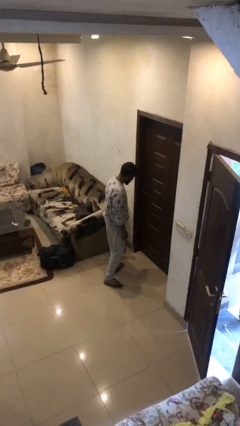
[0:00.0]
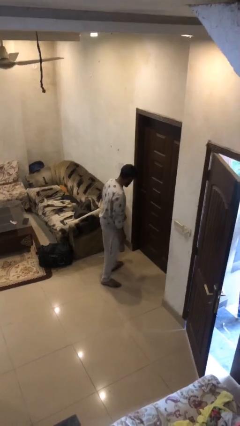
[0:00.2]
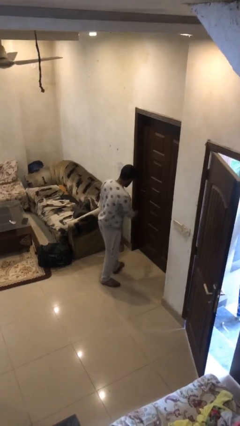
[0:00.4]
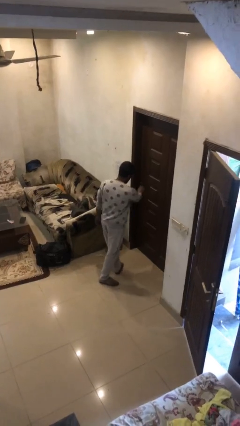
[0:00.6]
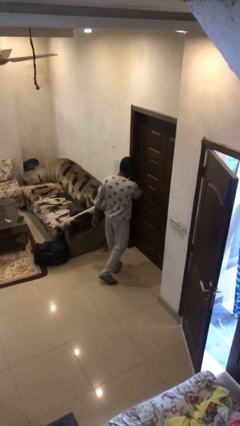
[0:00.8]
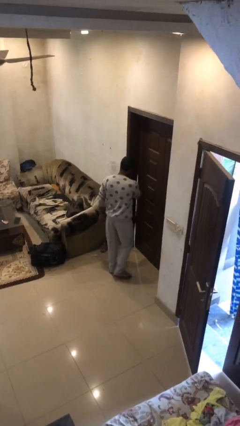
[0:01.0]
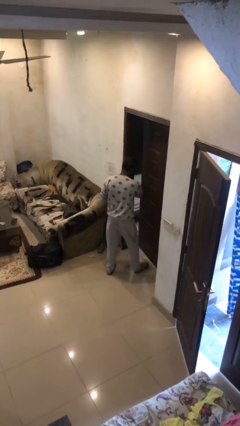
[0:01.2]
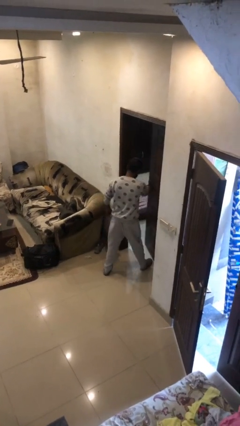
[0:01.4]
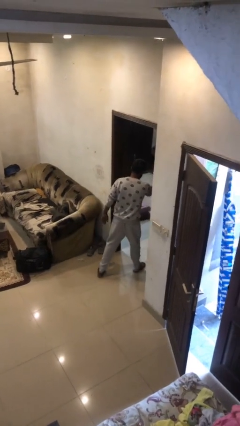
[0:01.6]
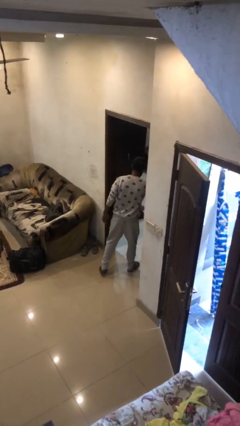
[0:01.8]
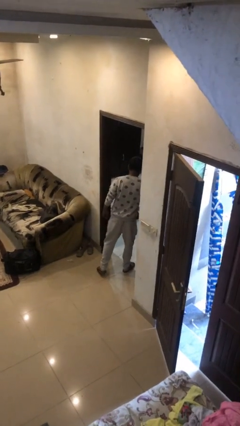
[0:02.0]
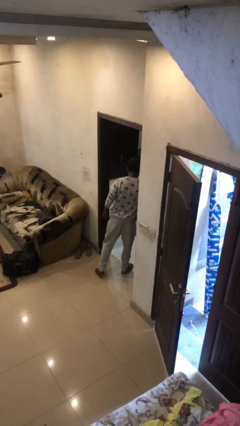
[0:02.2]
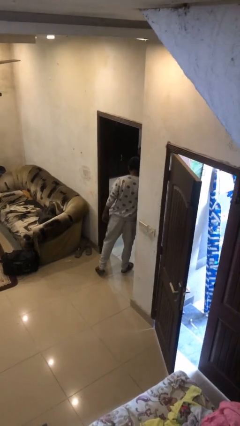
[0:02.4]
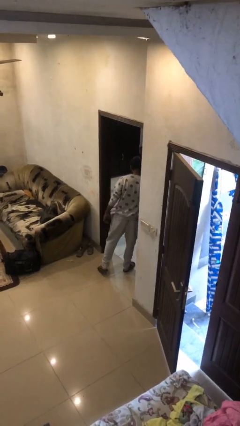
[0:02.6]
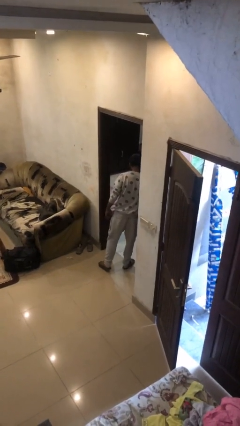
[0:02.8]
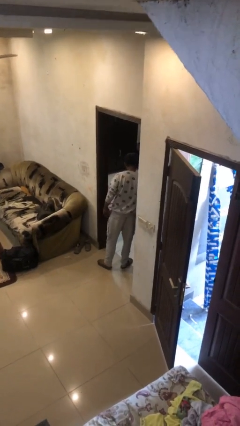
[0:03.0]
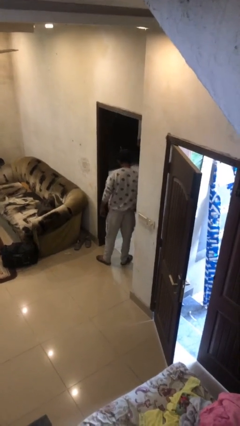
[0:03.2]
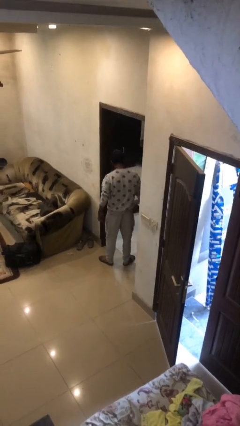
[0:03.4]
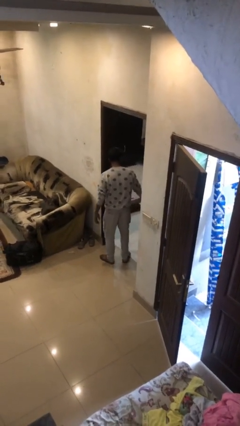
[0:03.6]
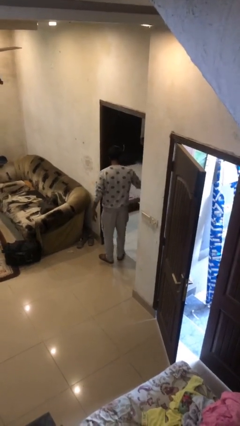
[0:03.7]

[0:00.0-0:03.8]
person opens facility door

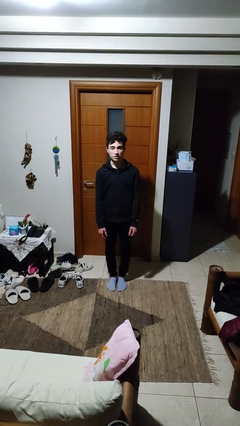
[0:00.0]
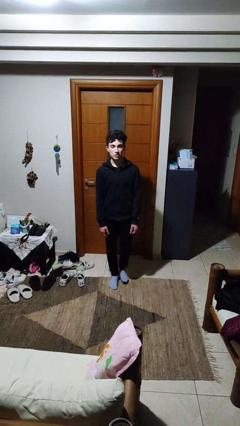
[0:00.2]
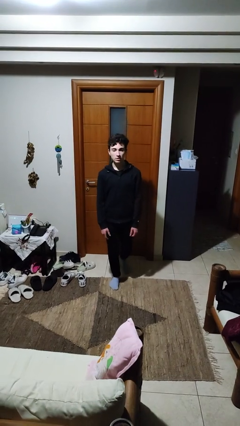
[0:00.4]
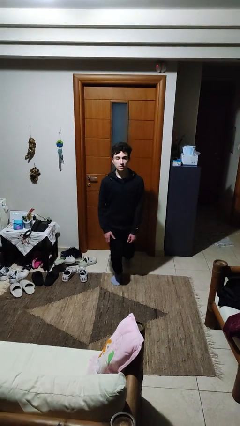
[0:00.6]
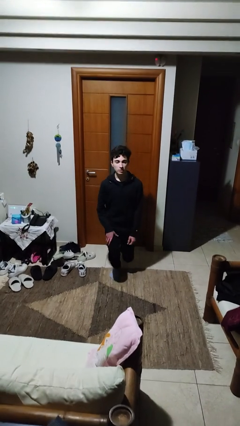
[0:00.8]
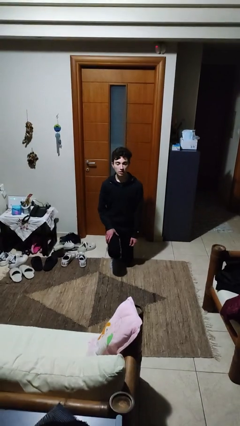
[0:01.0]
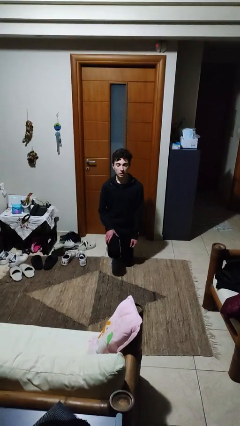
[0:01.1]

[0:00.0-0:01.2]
person kneels

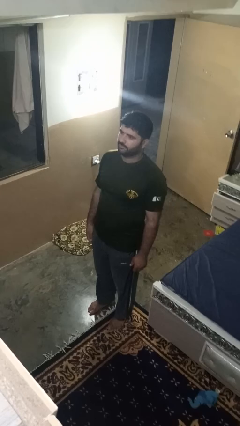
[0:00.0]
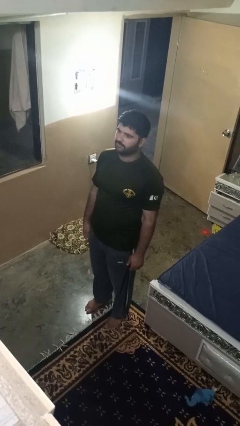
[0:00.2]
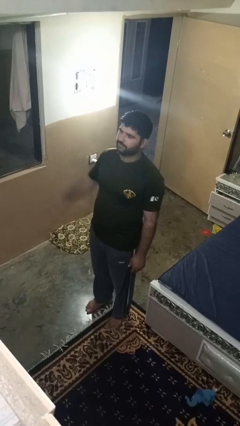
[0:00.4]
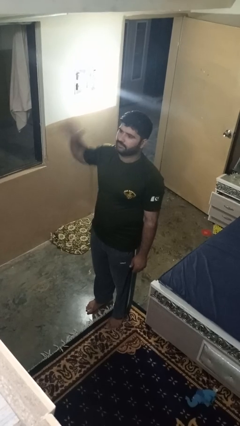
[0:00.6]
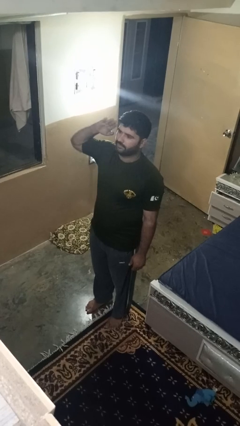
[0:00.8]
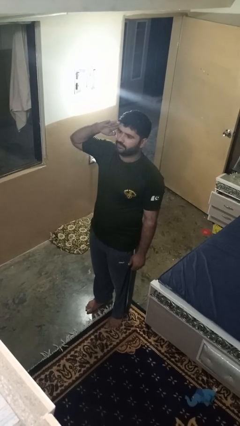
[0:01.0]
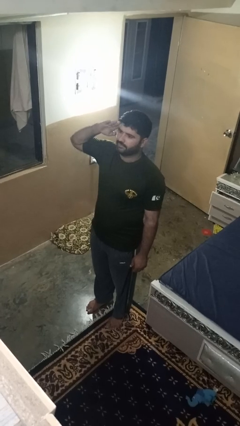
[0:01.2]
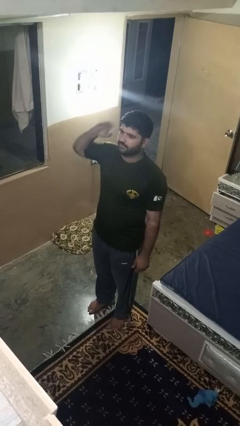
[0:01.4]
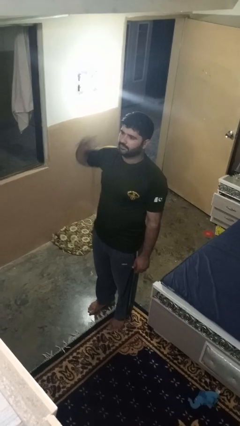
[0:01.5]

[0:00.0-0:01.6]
person salutes

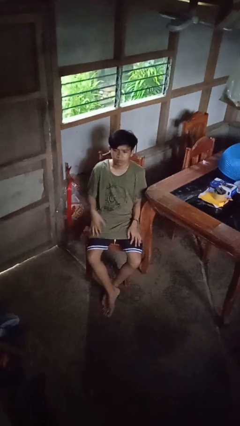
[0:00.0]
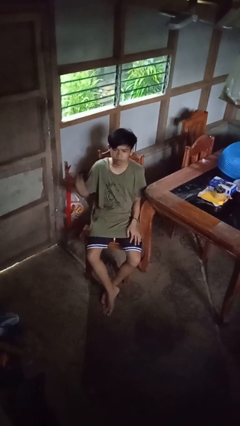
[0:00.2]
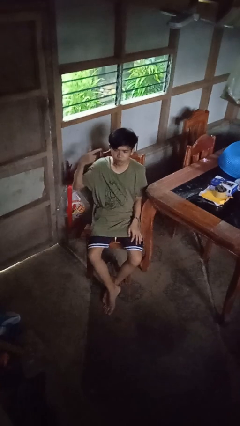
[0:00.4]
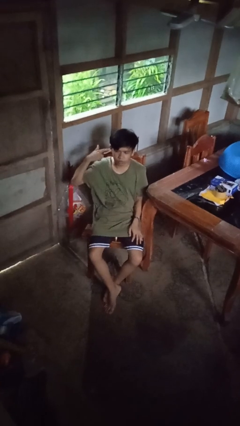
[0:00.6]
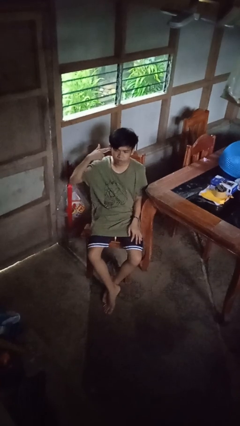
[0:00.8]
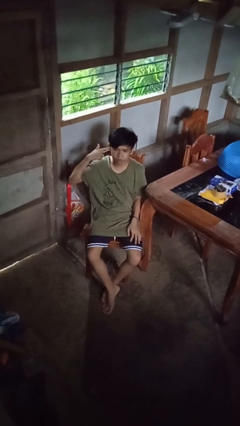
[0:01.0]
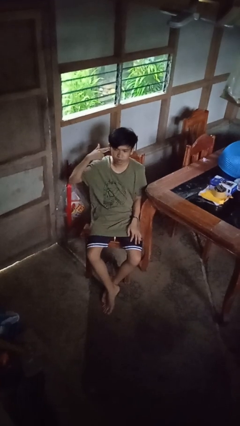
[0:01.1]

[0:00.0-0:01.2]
person gestures listen closely

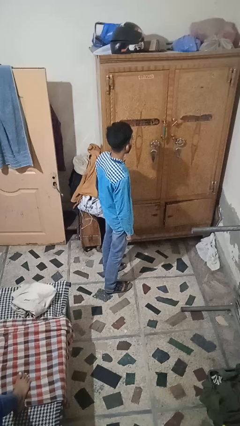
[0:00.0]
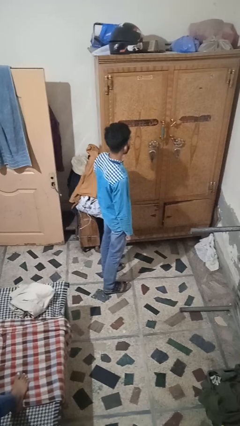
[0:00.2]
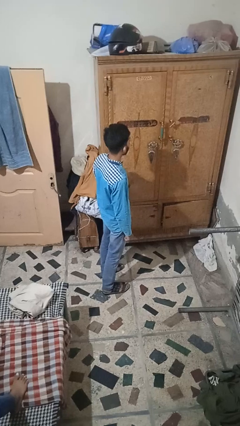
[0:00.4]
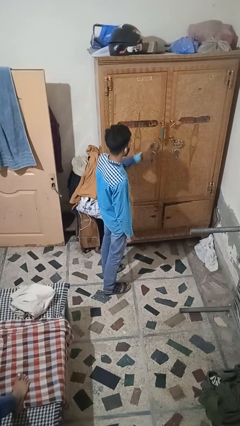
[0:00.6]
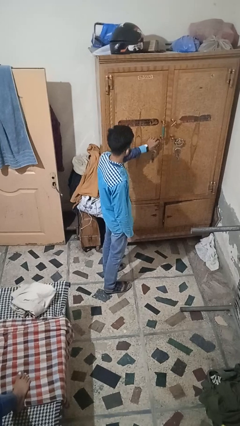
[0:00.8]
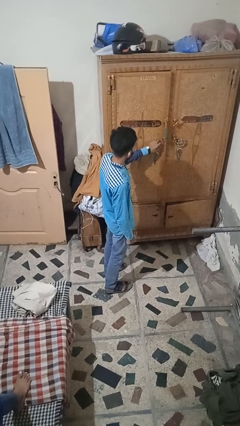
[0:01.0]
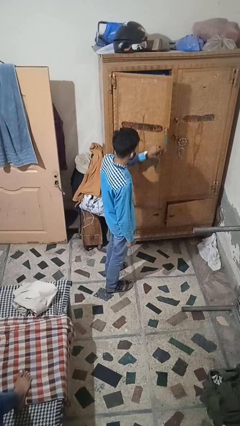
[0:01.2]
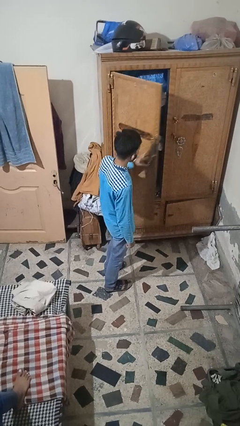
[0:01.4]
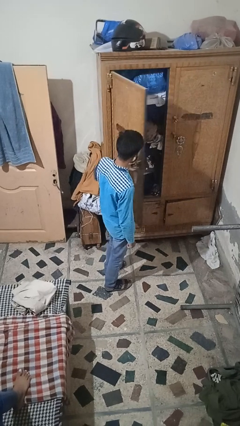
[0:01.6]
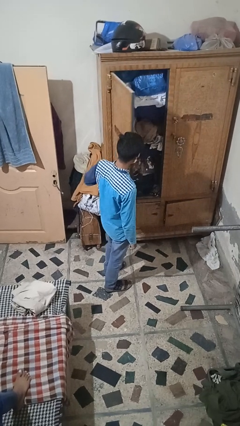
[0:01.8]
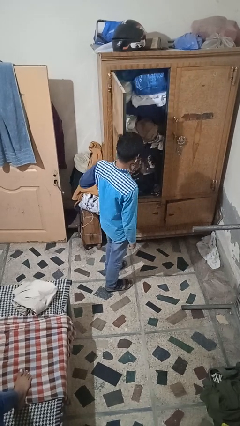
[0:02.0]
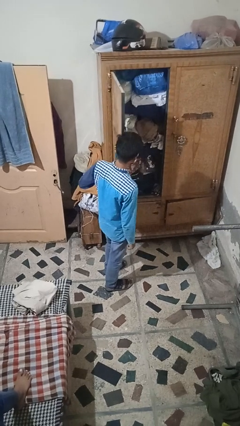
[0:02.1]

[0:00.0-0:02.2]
person opens closet door

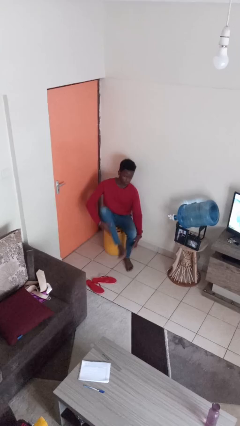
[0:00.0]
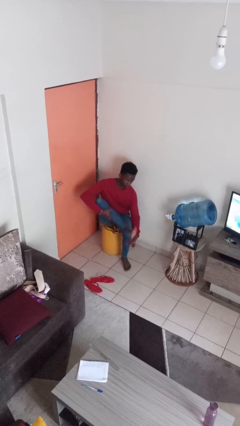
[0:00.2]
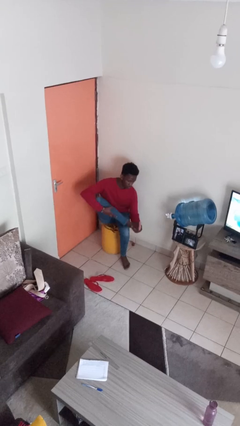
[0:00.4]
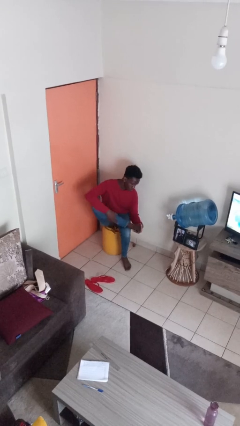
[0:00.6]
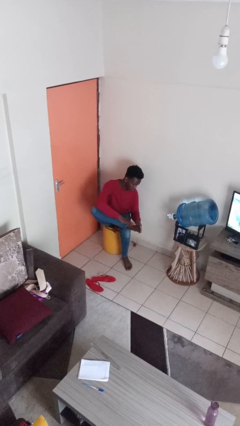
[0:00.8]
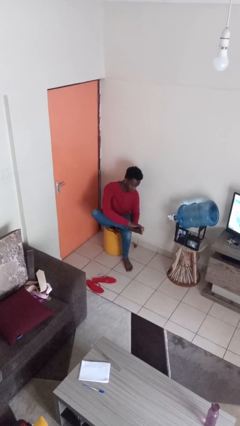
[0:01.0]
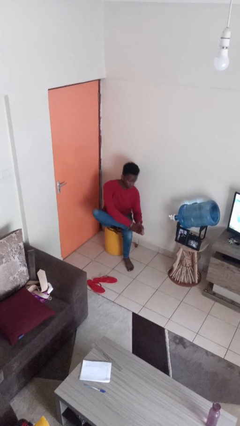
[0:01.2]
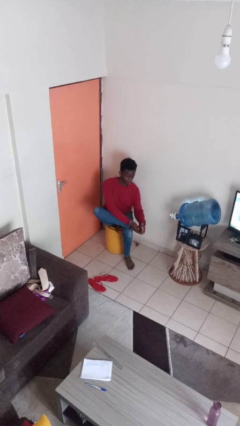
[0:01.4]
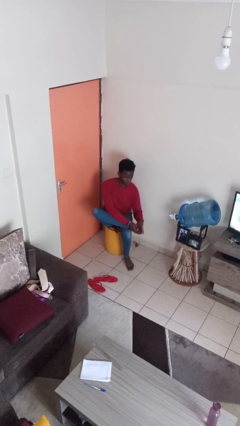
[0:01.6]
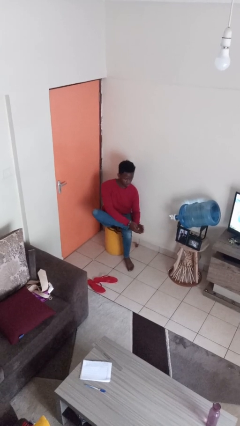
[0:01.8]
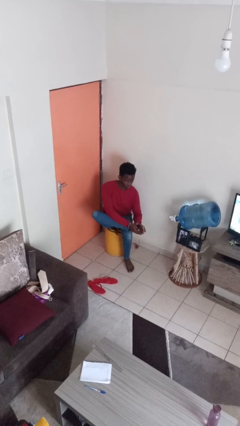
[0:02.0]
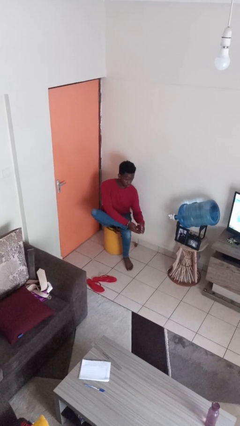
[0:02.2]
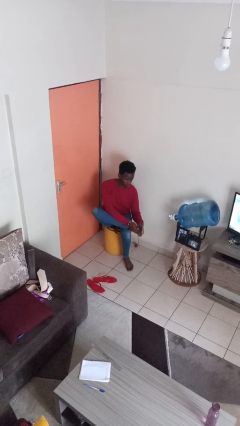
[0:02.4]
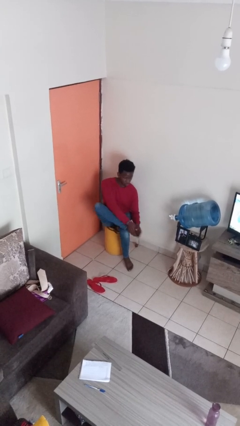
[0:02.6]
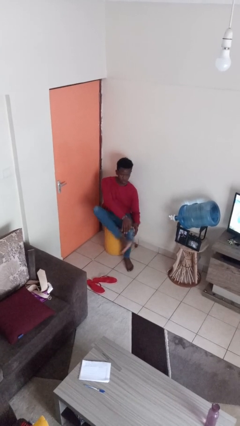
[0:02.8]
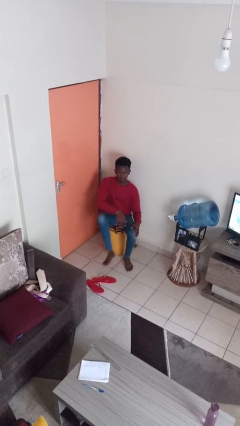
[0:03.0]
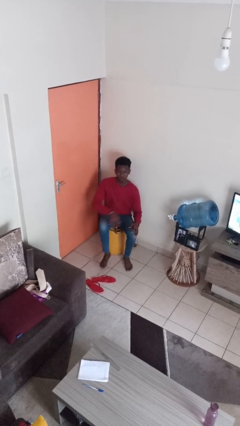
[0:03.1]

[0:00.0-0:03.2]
person rubs foot

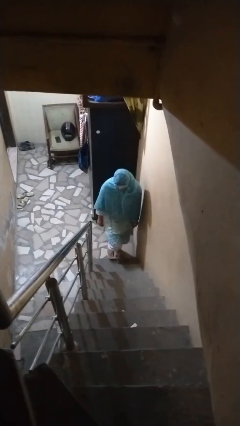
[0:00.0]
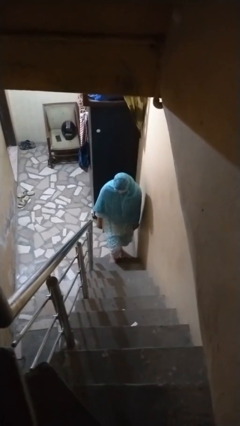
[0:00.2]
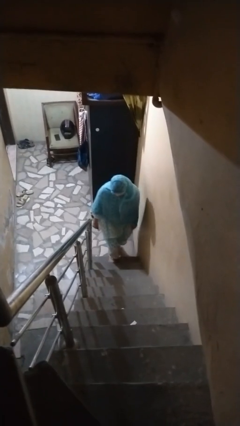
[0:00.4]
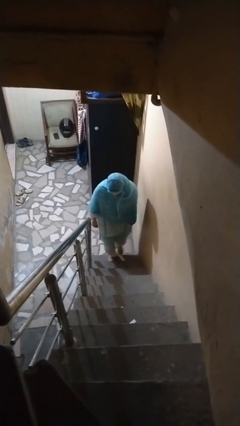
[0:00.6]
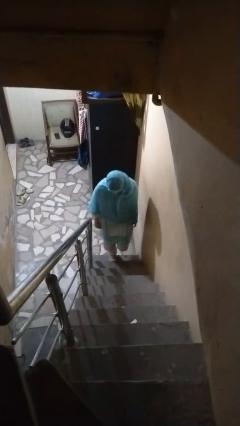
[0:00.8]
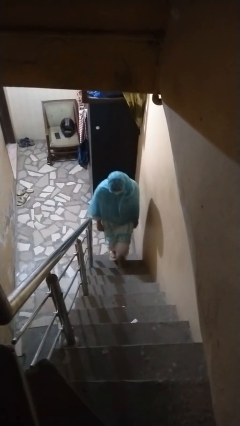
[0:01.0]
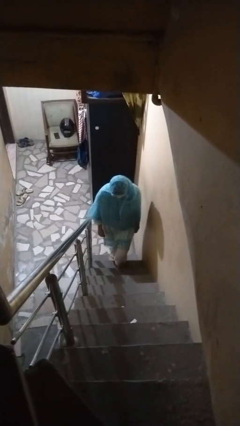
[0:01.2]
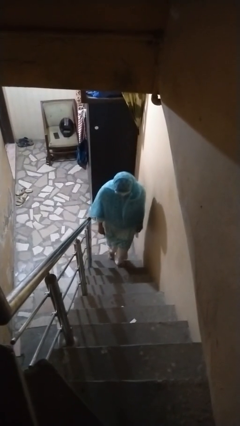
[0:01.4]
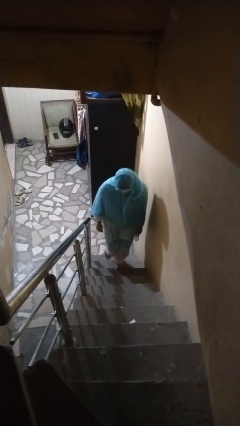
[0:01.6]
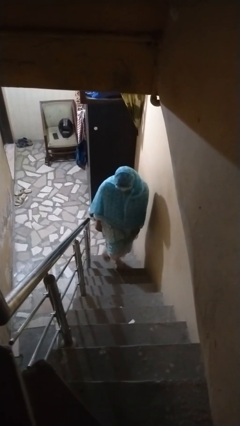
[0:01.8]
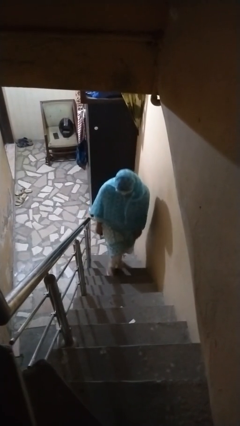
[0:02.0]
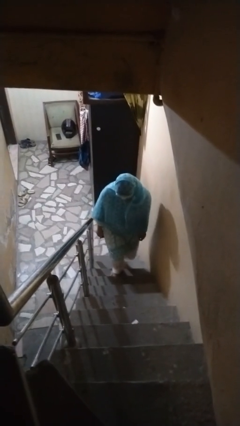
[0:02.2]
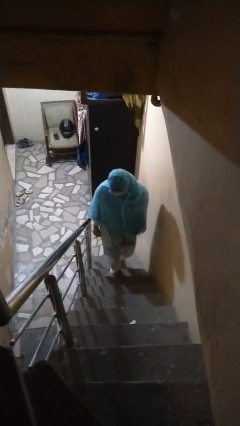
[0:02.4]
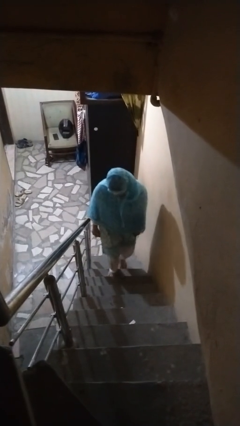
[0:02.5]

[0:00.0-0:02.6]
person climbs up stairs

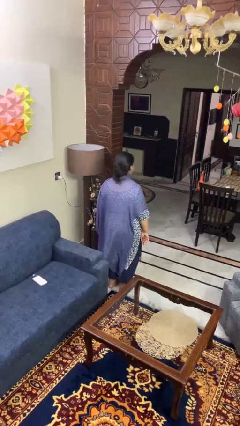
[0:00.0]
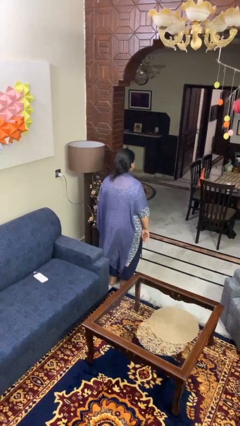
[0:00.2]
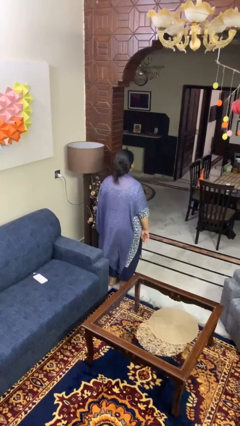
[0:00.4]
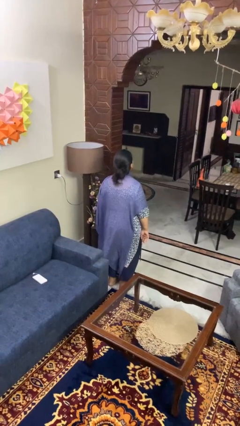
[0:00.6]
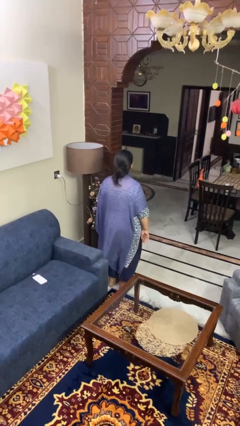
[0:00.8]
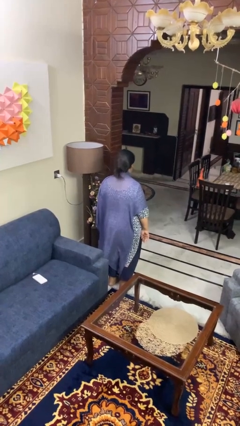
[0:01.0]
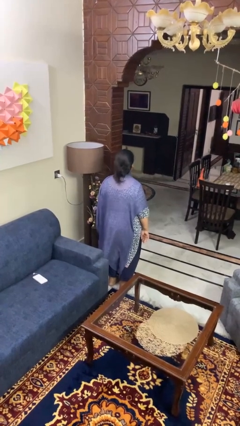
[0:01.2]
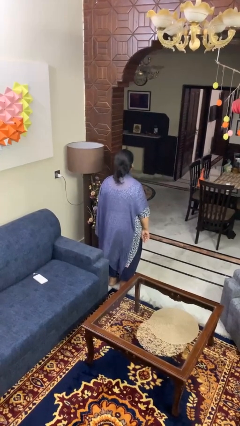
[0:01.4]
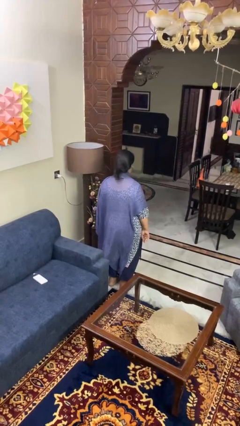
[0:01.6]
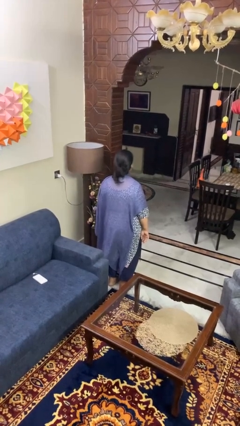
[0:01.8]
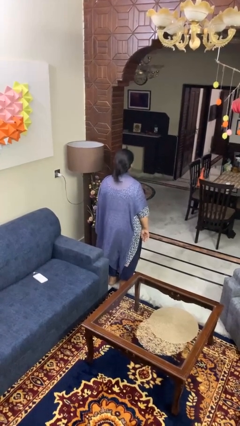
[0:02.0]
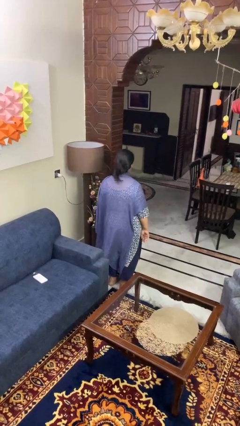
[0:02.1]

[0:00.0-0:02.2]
person nods head
